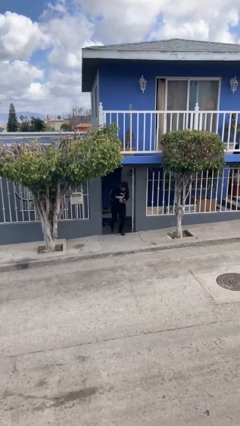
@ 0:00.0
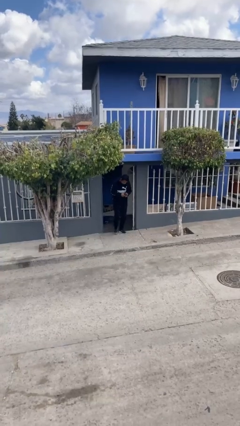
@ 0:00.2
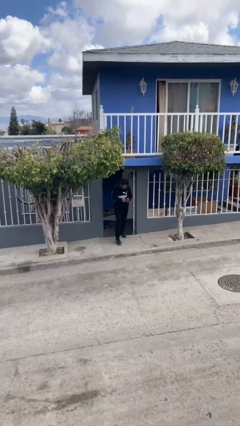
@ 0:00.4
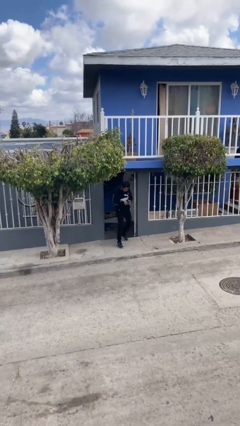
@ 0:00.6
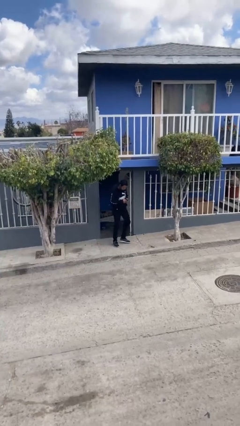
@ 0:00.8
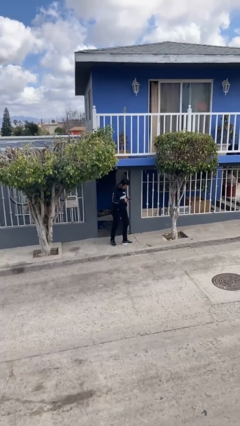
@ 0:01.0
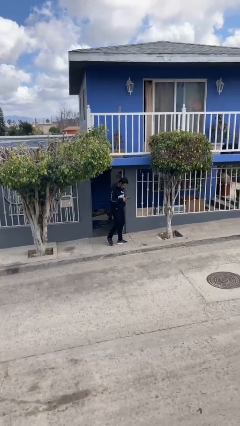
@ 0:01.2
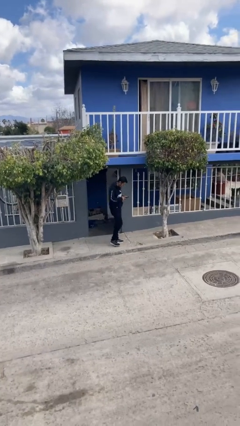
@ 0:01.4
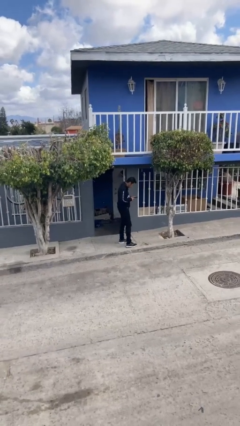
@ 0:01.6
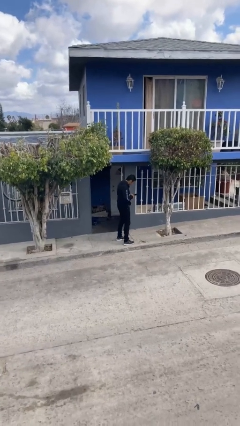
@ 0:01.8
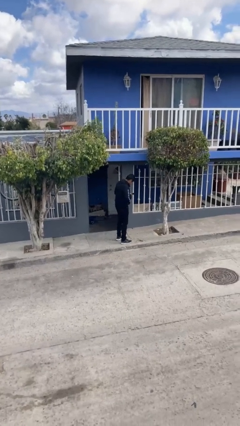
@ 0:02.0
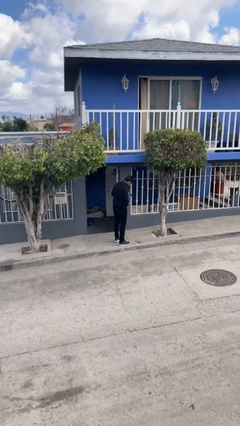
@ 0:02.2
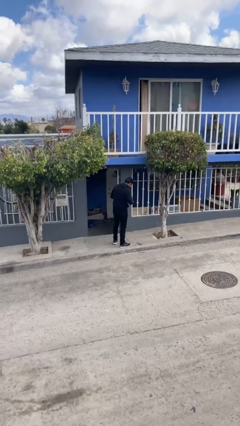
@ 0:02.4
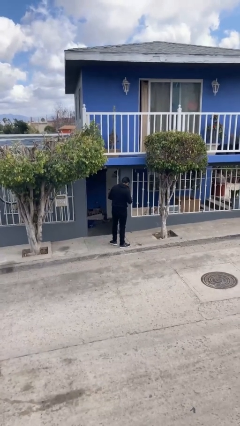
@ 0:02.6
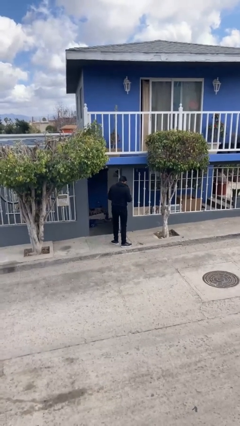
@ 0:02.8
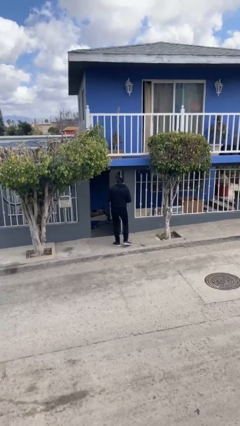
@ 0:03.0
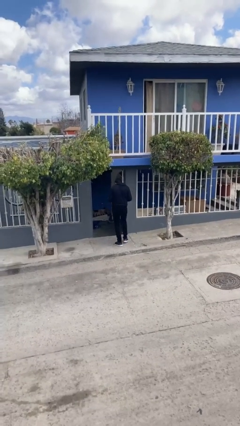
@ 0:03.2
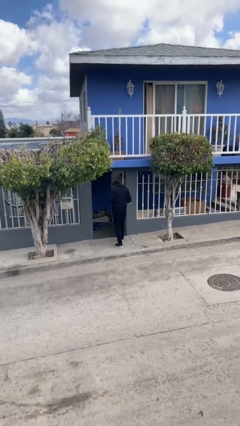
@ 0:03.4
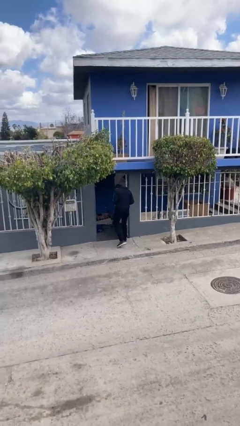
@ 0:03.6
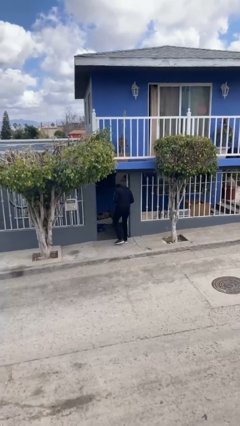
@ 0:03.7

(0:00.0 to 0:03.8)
person enters scene through structure

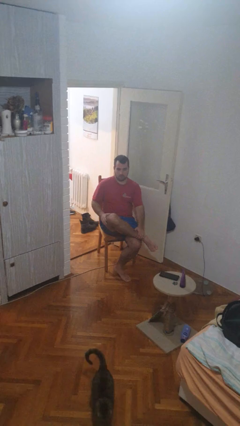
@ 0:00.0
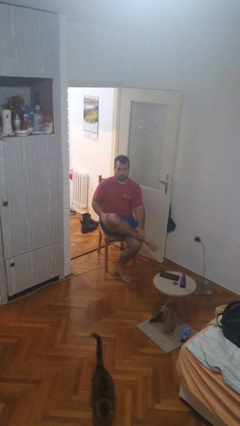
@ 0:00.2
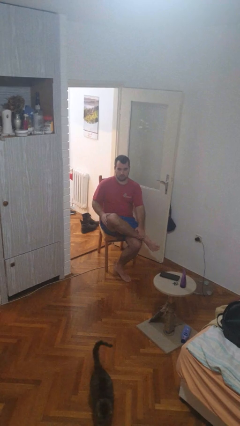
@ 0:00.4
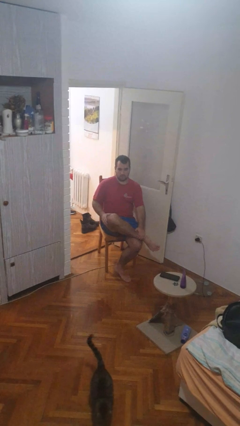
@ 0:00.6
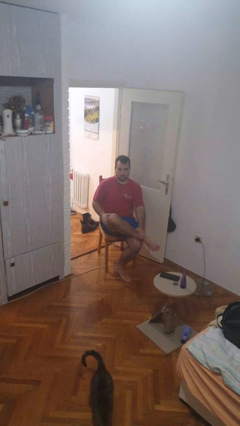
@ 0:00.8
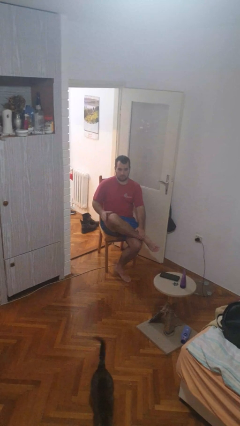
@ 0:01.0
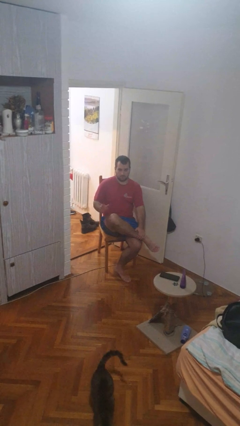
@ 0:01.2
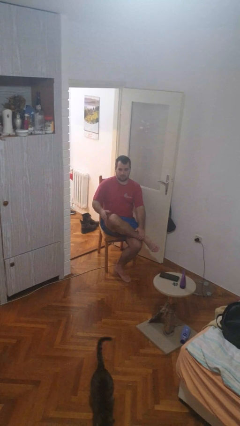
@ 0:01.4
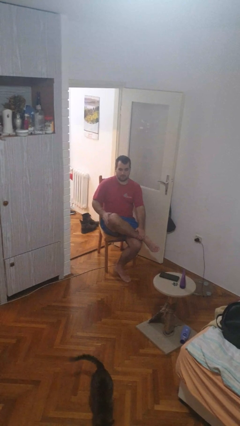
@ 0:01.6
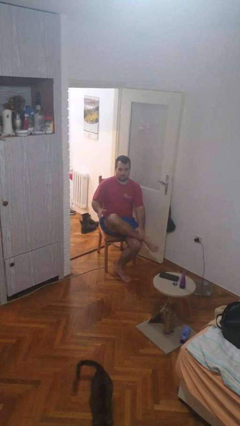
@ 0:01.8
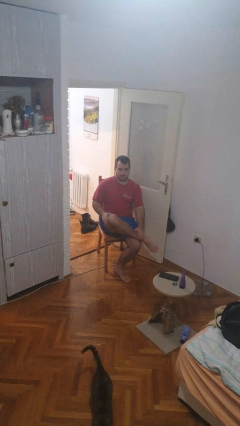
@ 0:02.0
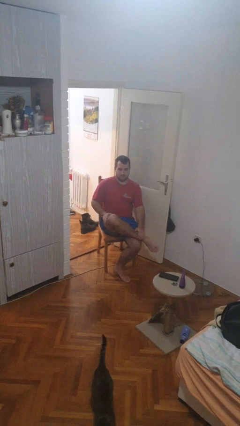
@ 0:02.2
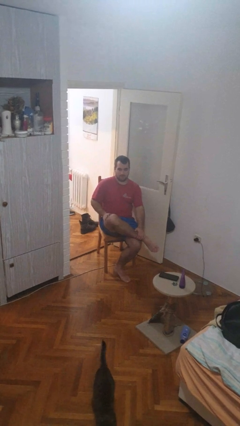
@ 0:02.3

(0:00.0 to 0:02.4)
person slaps hands on thighs

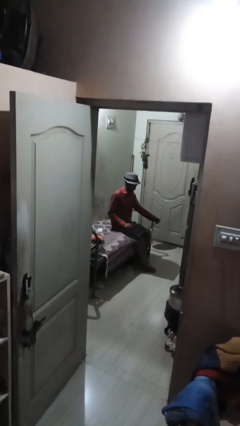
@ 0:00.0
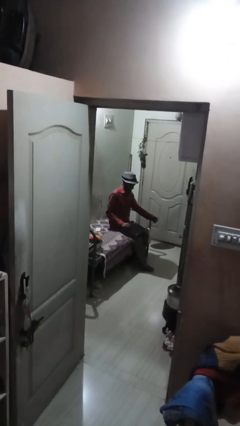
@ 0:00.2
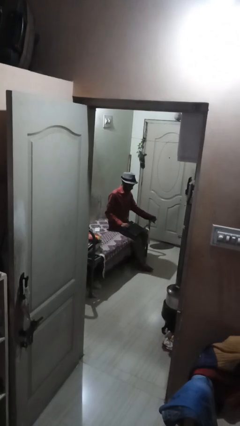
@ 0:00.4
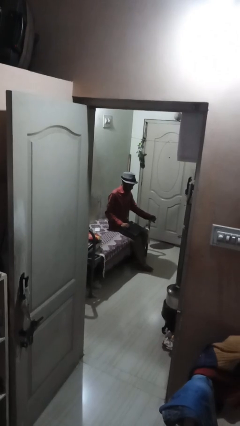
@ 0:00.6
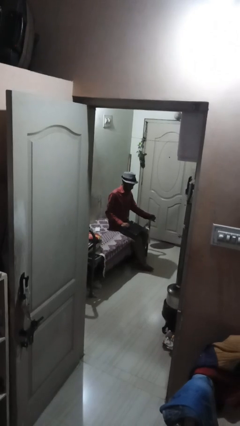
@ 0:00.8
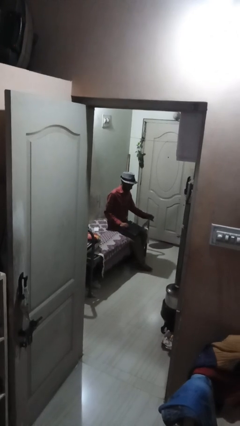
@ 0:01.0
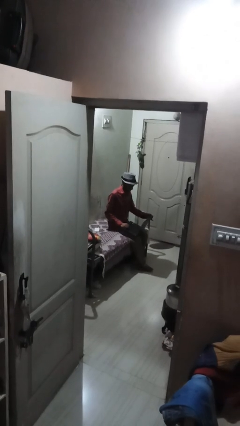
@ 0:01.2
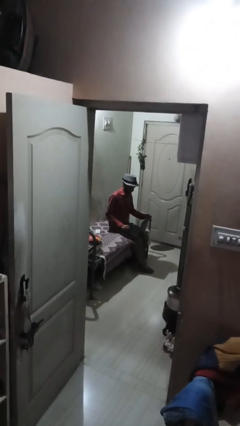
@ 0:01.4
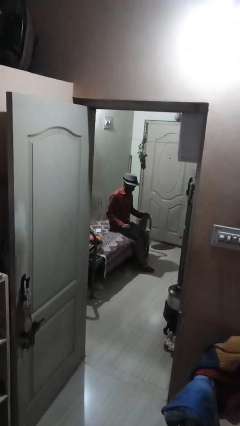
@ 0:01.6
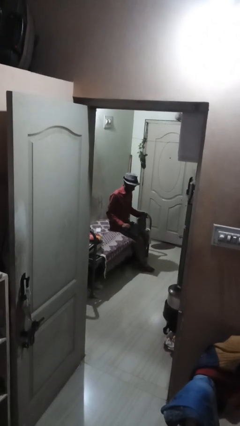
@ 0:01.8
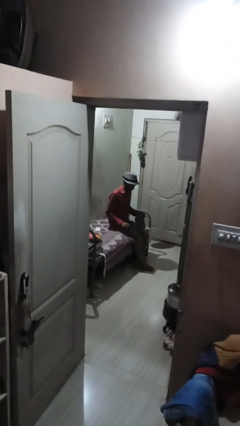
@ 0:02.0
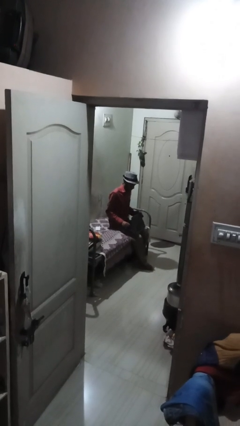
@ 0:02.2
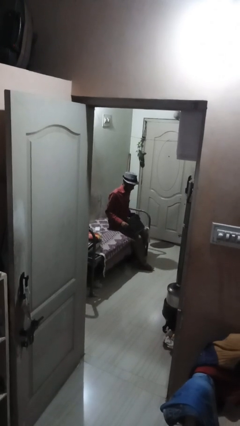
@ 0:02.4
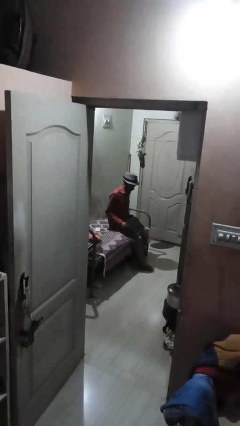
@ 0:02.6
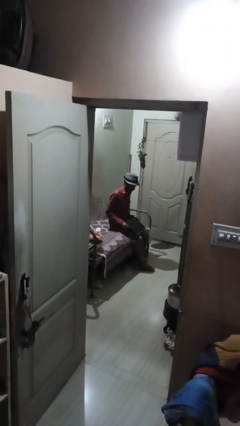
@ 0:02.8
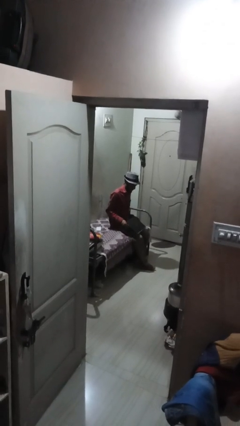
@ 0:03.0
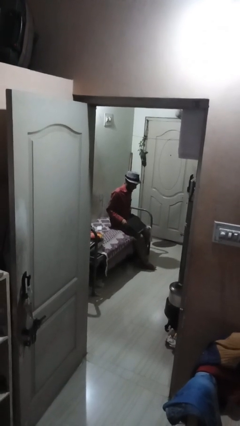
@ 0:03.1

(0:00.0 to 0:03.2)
person closes laptop

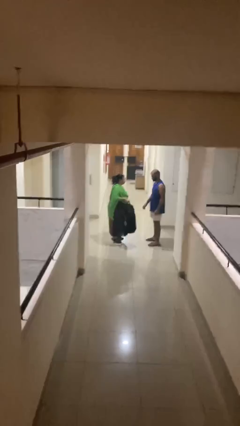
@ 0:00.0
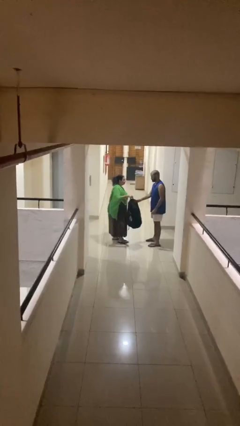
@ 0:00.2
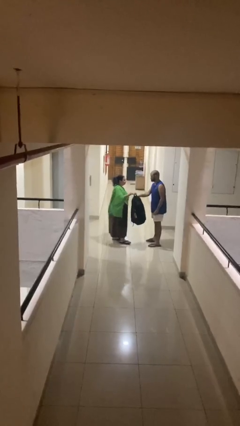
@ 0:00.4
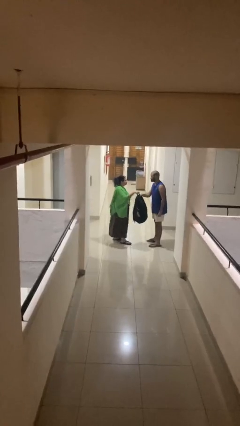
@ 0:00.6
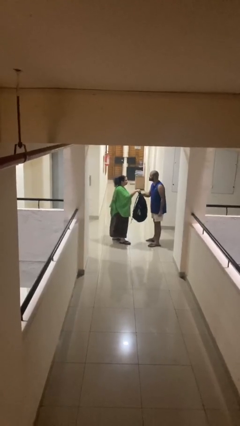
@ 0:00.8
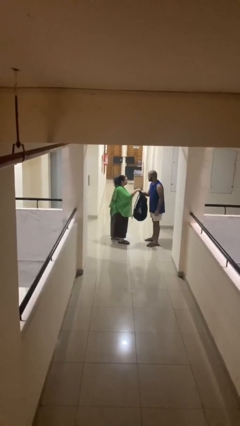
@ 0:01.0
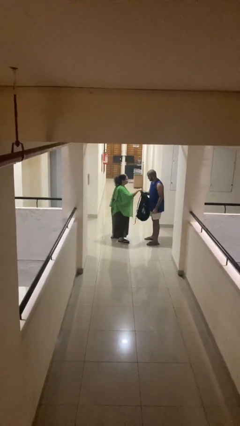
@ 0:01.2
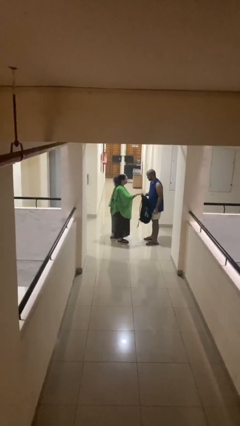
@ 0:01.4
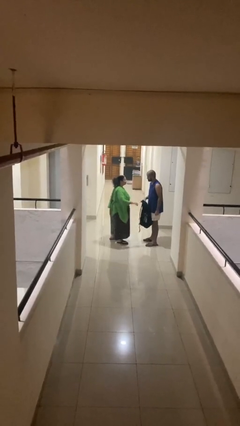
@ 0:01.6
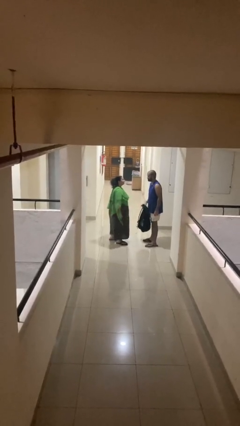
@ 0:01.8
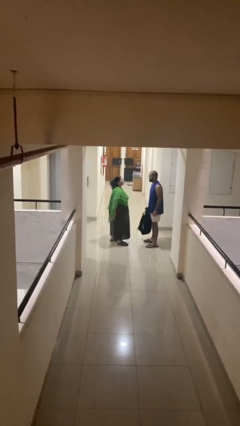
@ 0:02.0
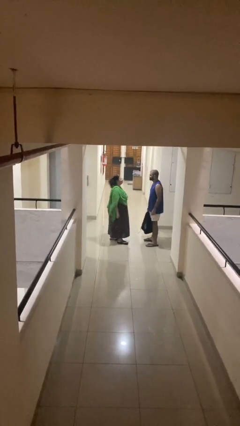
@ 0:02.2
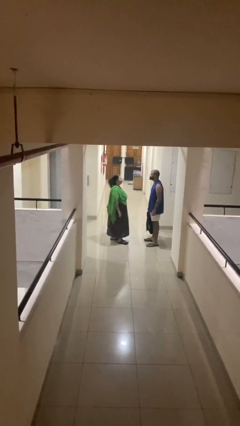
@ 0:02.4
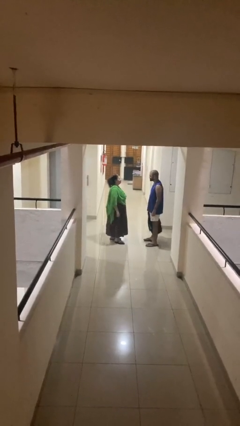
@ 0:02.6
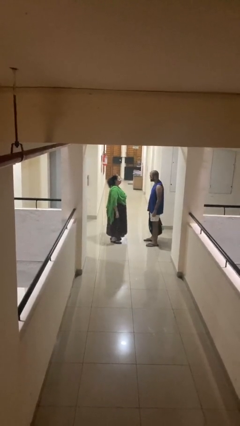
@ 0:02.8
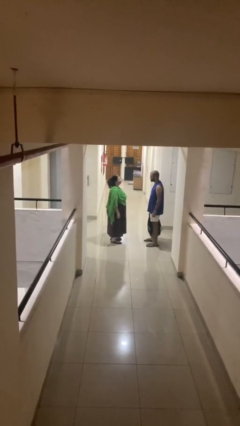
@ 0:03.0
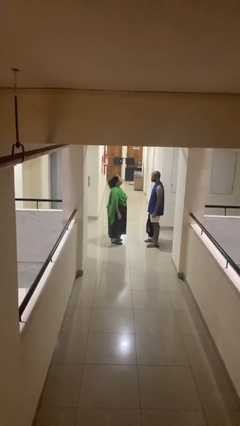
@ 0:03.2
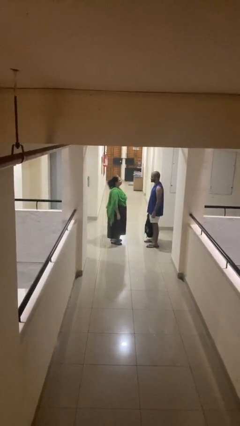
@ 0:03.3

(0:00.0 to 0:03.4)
person transfers object to person

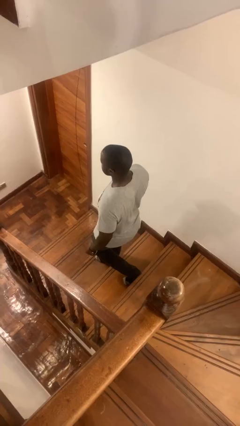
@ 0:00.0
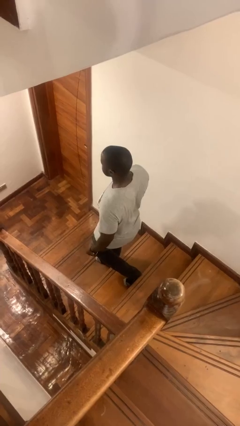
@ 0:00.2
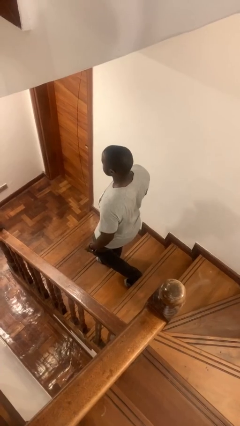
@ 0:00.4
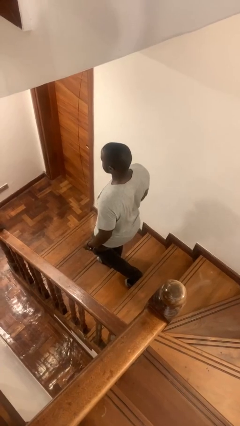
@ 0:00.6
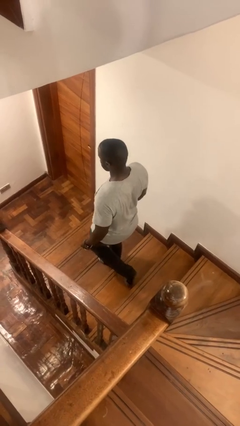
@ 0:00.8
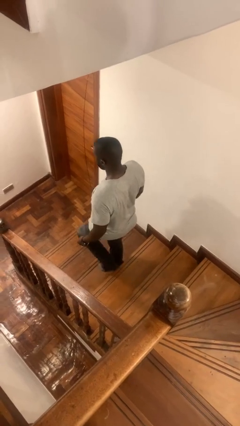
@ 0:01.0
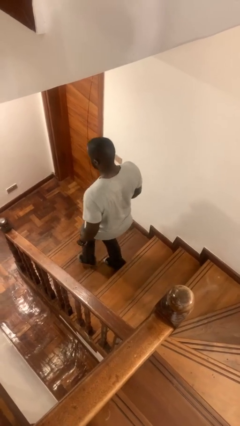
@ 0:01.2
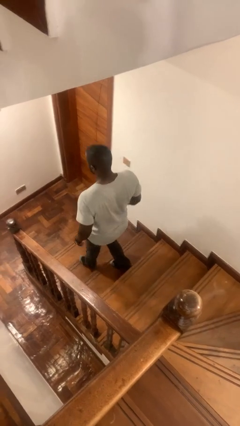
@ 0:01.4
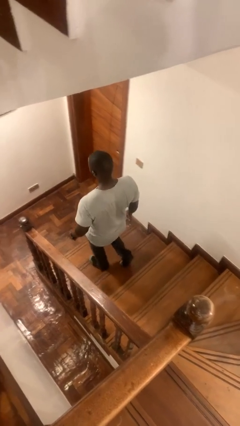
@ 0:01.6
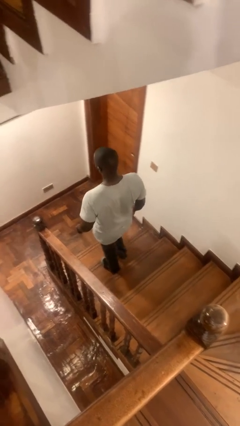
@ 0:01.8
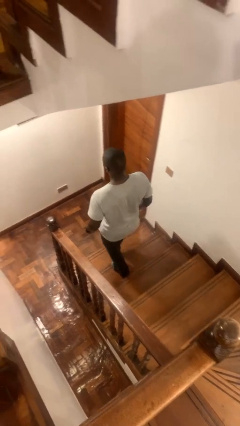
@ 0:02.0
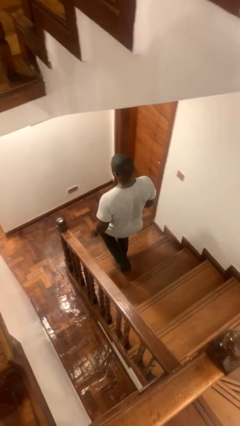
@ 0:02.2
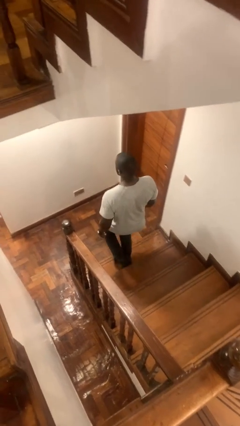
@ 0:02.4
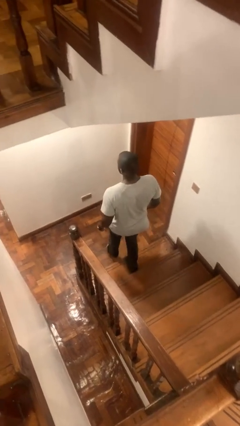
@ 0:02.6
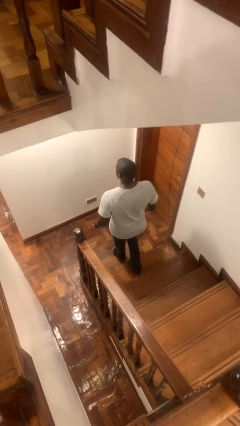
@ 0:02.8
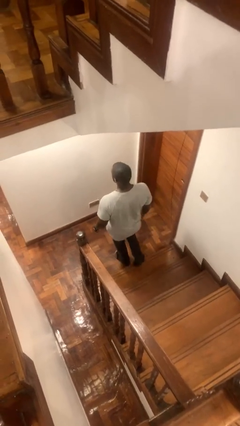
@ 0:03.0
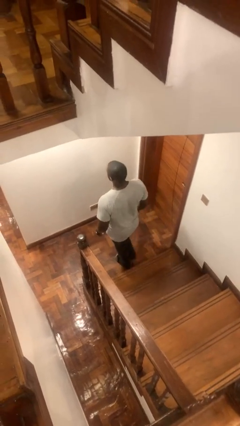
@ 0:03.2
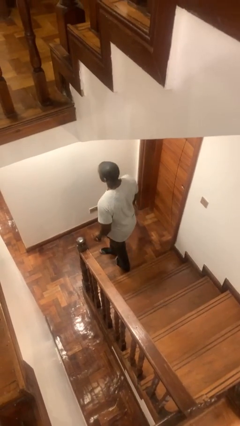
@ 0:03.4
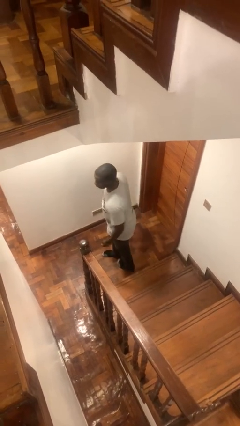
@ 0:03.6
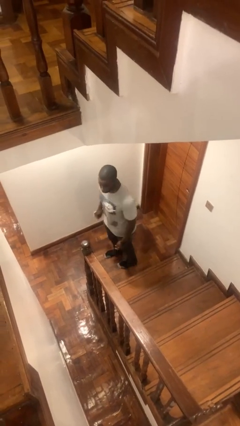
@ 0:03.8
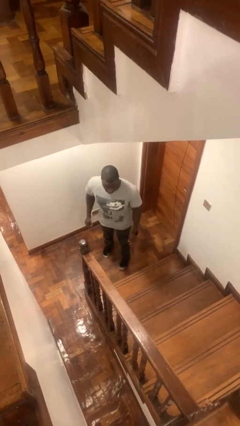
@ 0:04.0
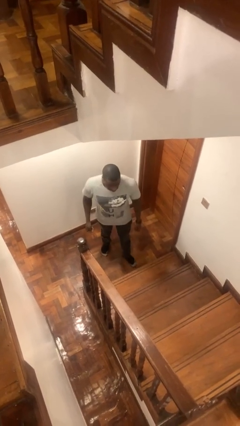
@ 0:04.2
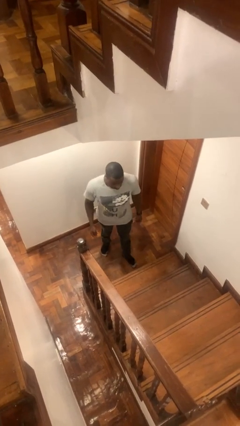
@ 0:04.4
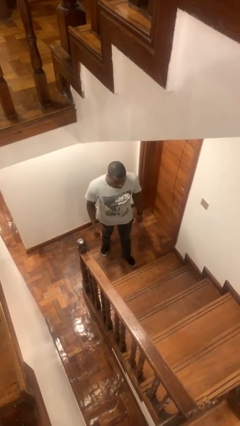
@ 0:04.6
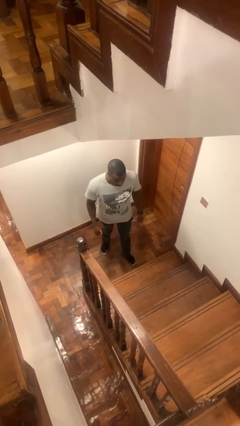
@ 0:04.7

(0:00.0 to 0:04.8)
person climbs down stairs
